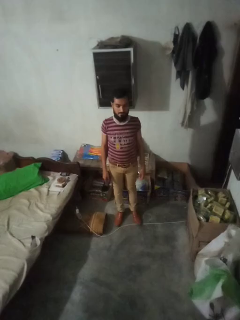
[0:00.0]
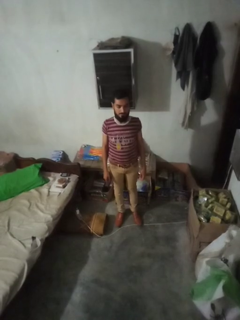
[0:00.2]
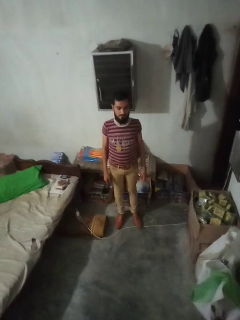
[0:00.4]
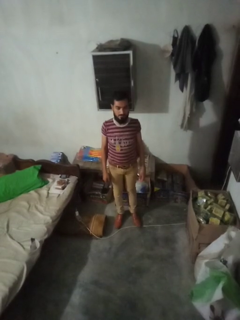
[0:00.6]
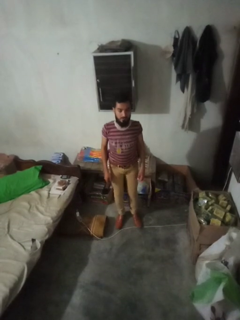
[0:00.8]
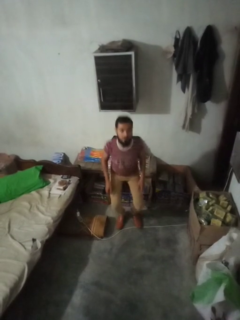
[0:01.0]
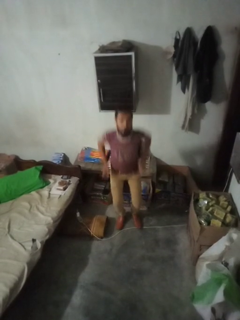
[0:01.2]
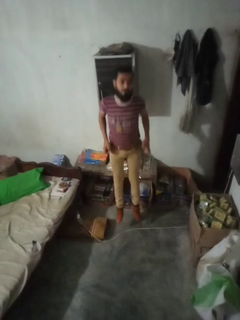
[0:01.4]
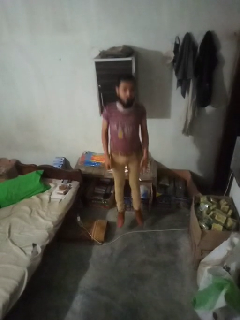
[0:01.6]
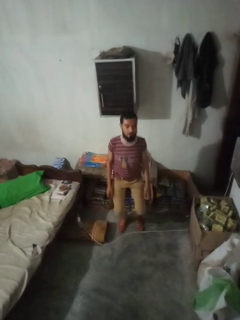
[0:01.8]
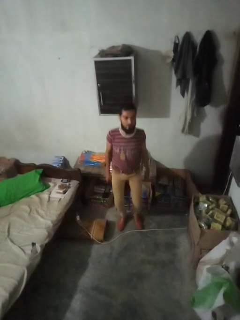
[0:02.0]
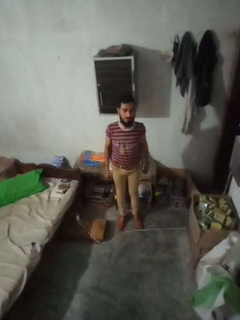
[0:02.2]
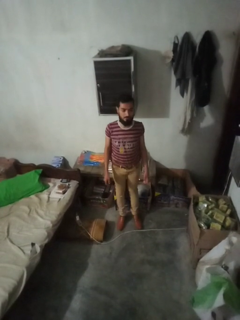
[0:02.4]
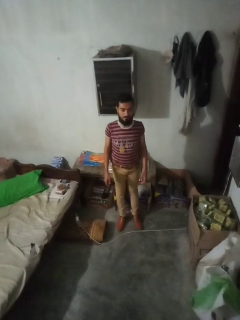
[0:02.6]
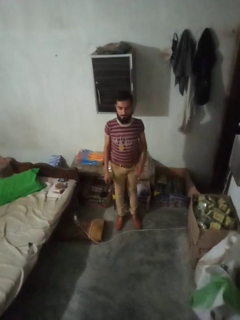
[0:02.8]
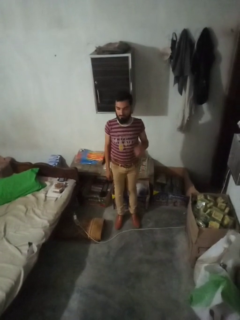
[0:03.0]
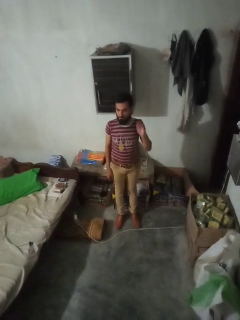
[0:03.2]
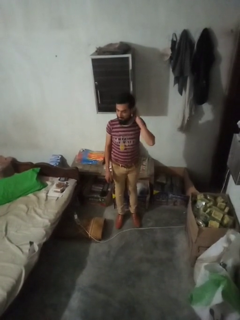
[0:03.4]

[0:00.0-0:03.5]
person jumps

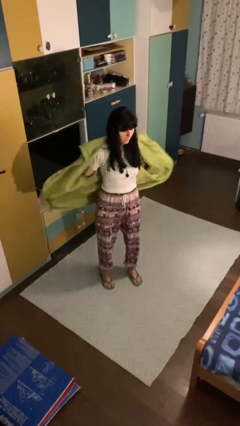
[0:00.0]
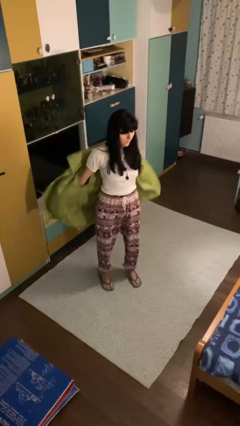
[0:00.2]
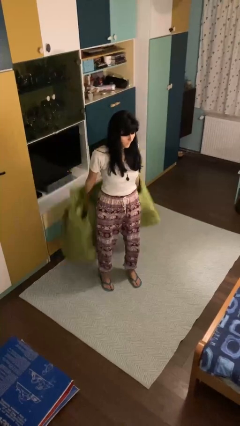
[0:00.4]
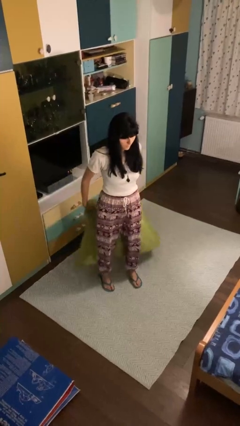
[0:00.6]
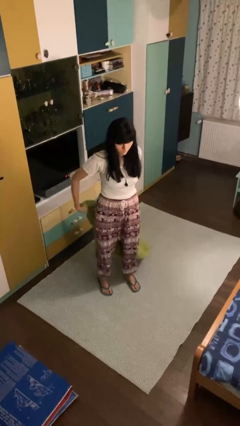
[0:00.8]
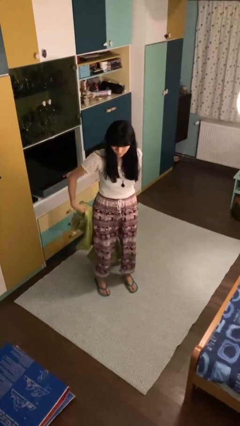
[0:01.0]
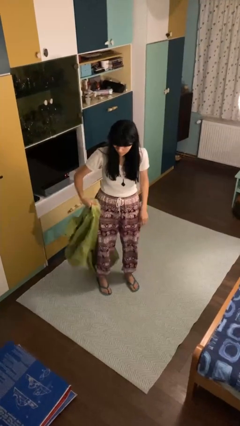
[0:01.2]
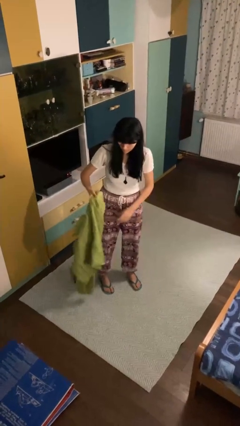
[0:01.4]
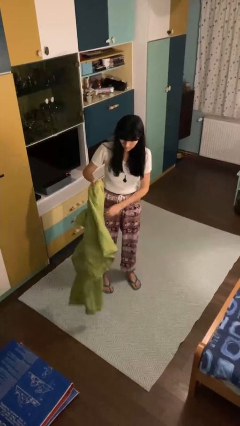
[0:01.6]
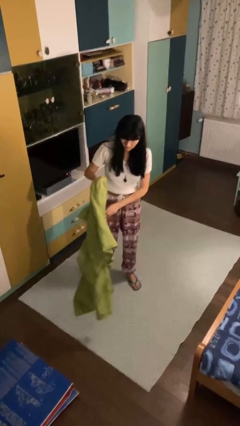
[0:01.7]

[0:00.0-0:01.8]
person takes off jacket

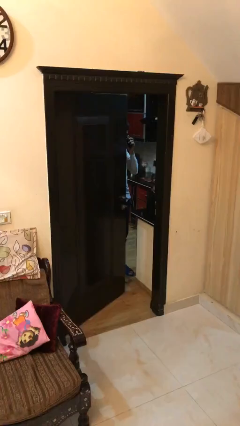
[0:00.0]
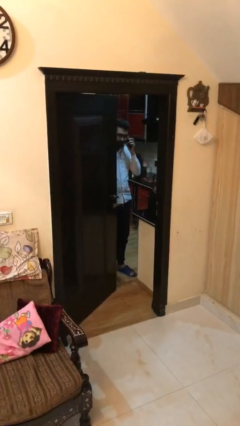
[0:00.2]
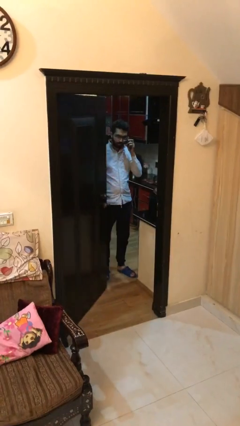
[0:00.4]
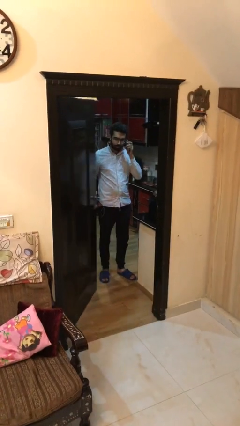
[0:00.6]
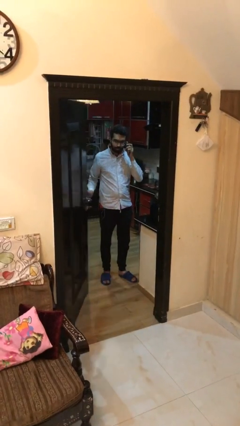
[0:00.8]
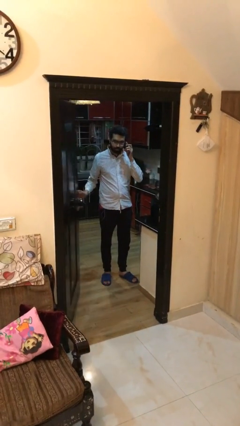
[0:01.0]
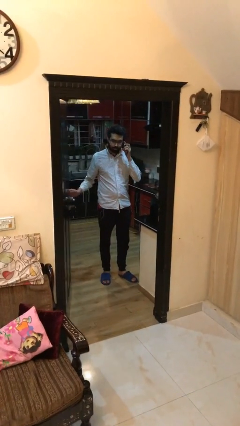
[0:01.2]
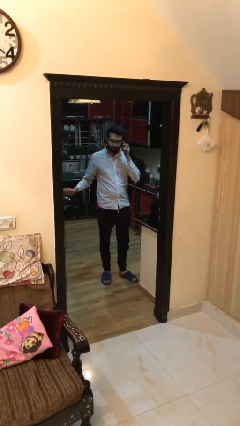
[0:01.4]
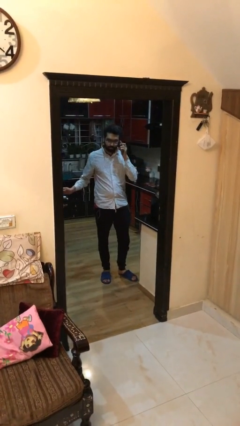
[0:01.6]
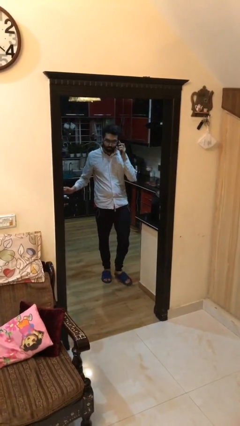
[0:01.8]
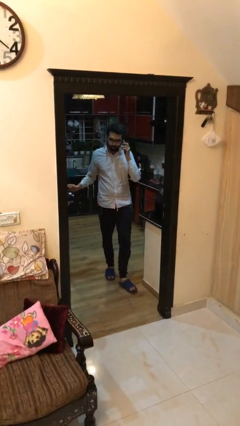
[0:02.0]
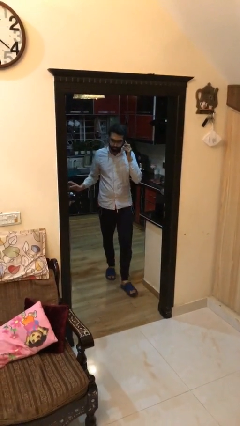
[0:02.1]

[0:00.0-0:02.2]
person opens facility door

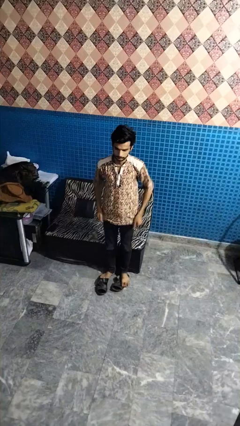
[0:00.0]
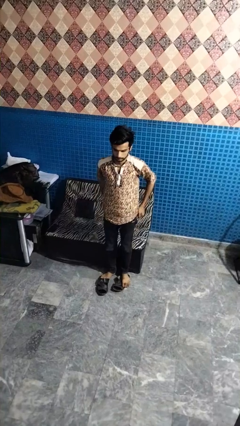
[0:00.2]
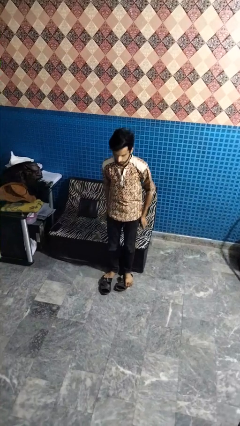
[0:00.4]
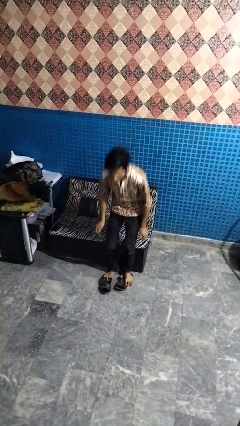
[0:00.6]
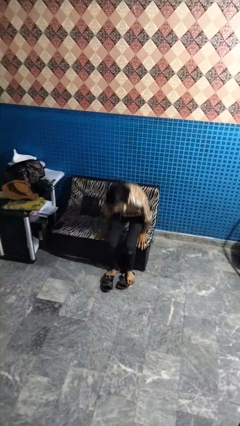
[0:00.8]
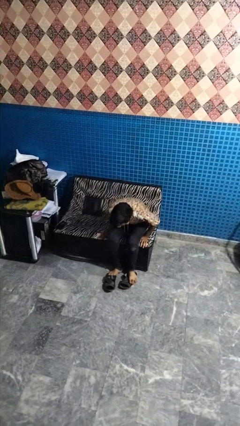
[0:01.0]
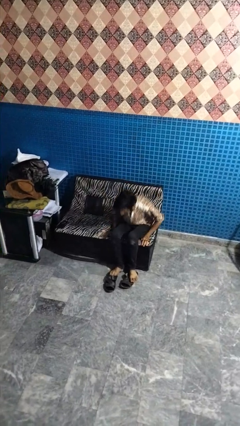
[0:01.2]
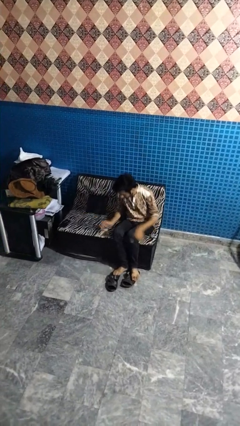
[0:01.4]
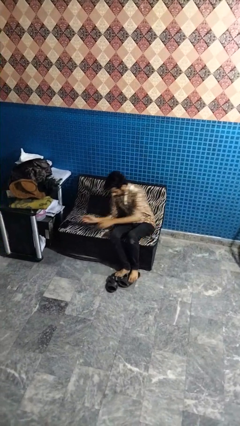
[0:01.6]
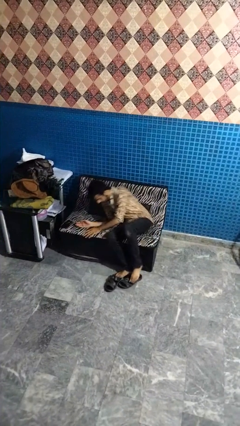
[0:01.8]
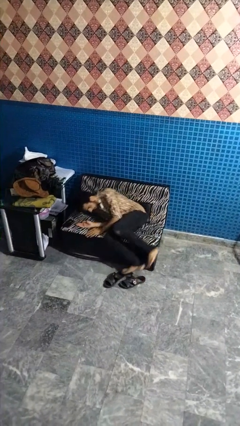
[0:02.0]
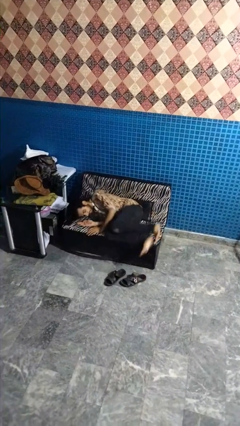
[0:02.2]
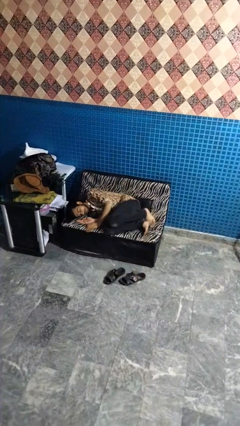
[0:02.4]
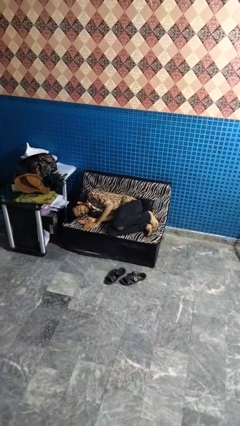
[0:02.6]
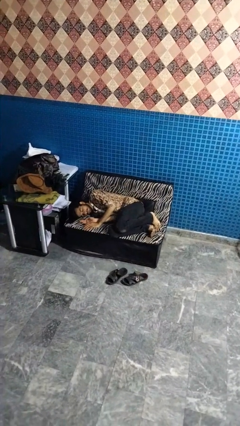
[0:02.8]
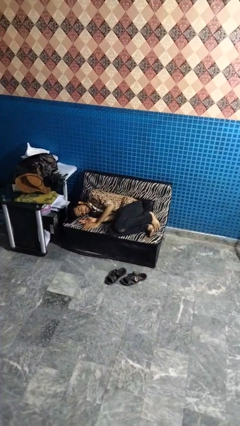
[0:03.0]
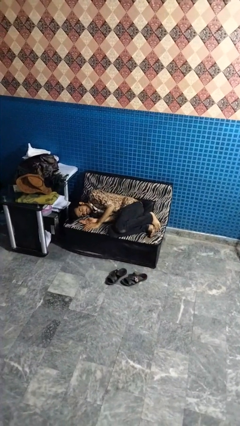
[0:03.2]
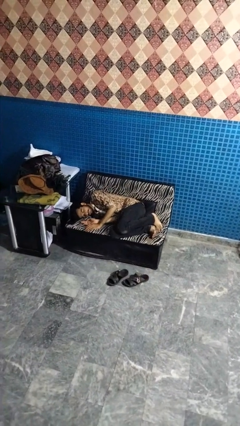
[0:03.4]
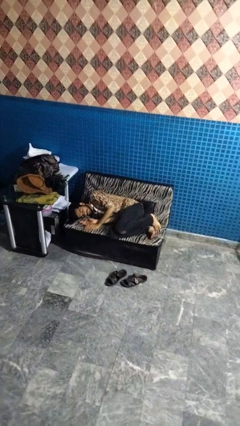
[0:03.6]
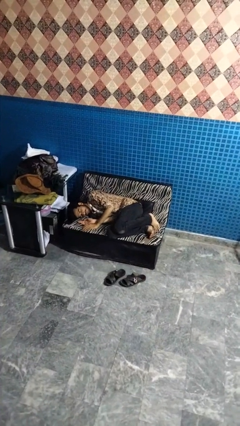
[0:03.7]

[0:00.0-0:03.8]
person lies down on couch

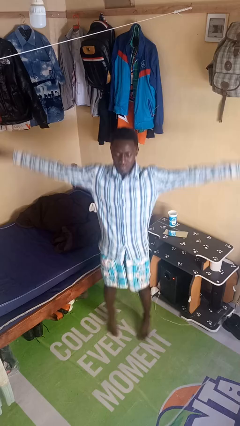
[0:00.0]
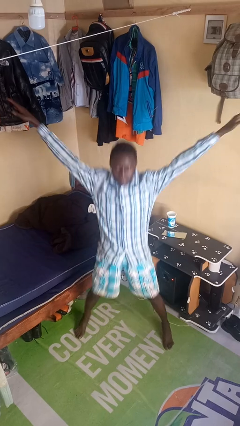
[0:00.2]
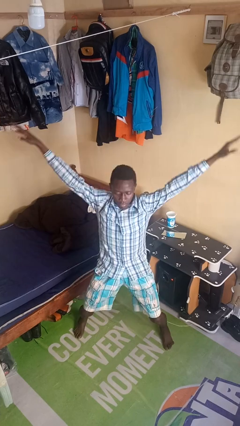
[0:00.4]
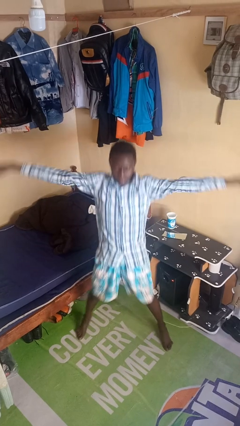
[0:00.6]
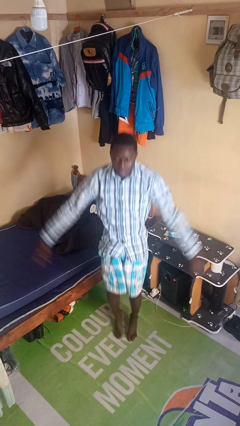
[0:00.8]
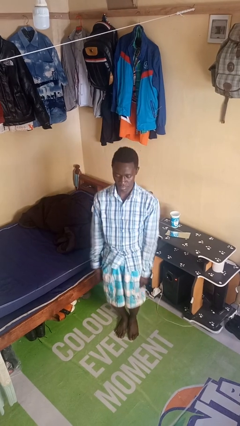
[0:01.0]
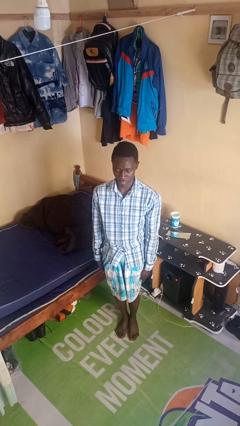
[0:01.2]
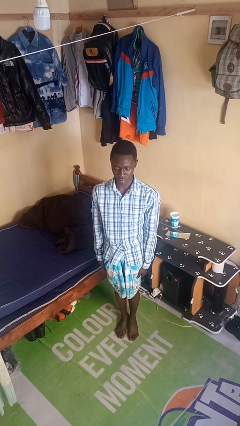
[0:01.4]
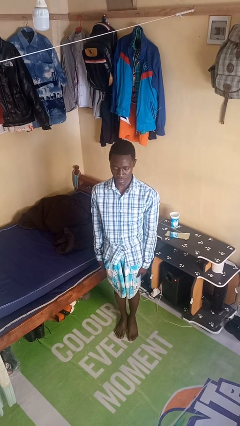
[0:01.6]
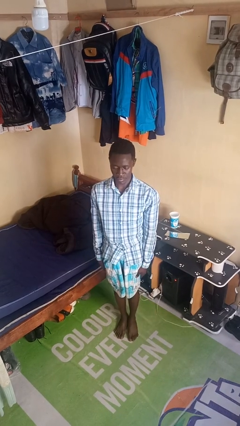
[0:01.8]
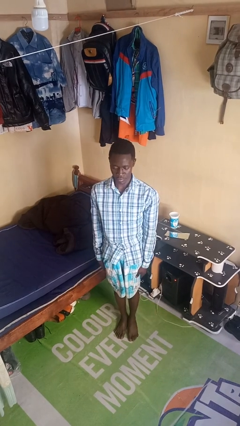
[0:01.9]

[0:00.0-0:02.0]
person exercises with jumping jacks

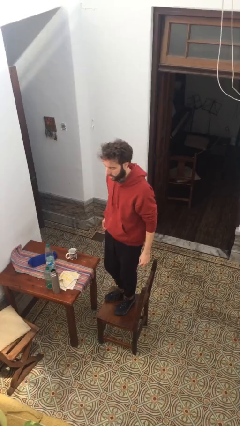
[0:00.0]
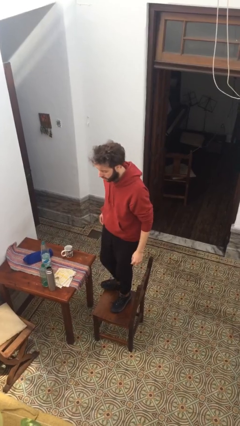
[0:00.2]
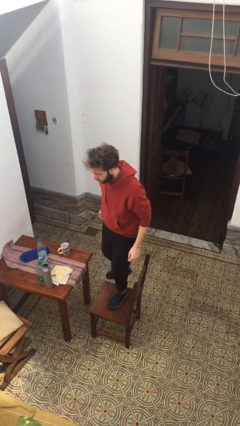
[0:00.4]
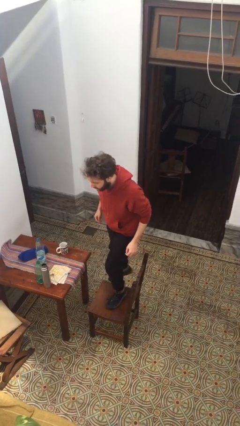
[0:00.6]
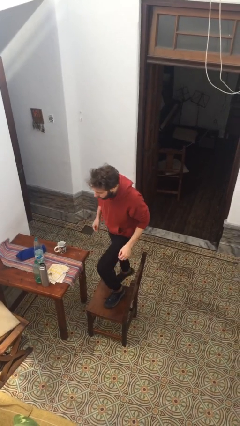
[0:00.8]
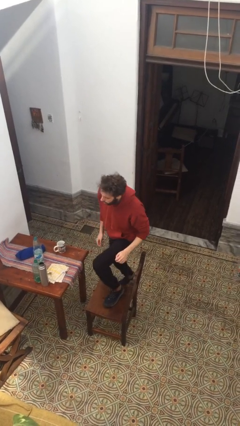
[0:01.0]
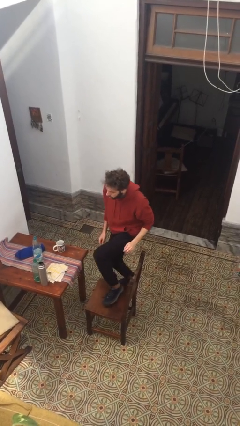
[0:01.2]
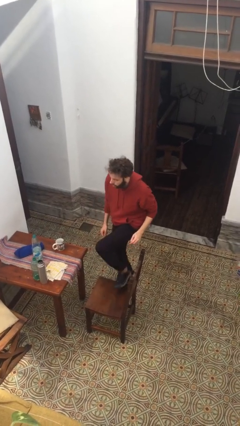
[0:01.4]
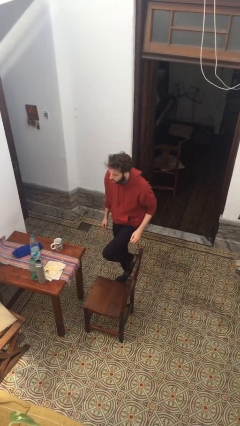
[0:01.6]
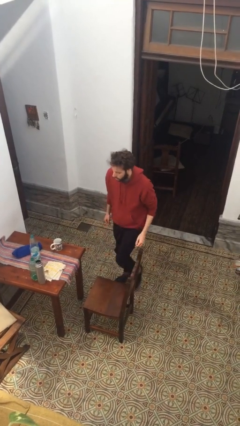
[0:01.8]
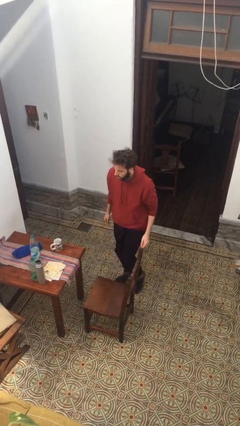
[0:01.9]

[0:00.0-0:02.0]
person climbs off chair

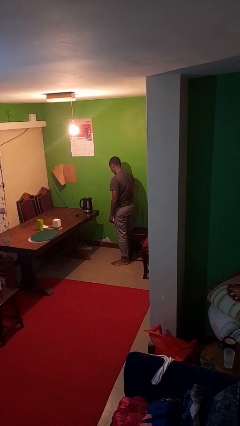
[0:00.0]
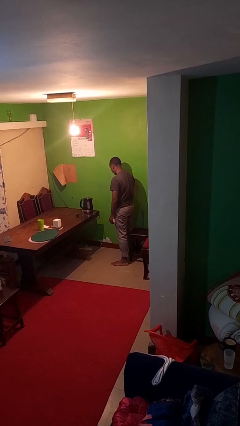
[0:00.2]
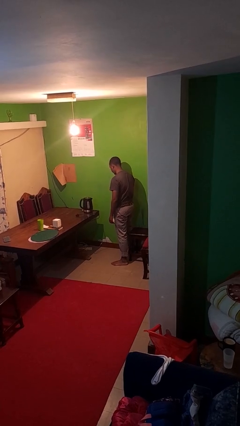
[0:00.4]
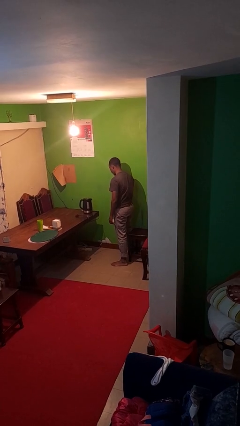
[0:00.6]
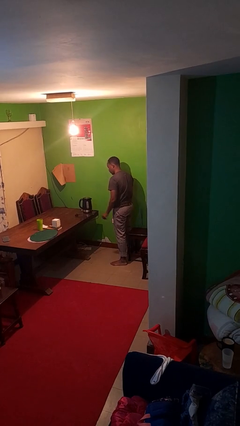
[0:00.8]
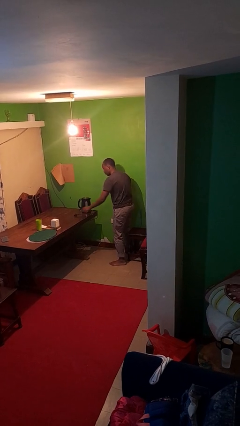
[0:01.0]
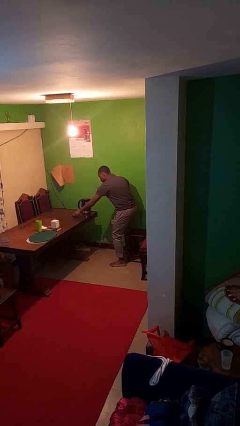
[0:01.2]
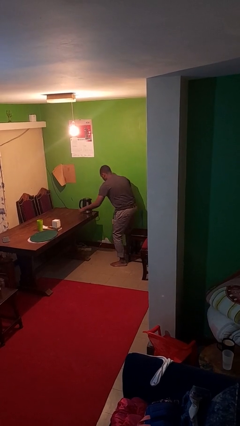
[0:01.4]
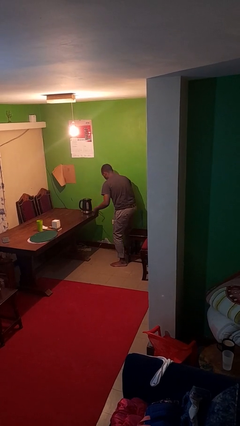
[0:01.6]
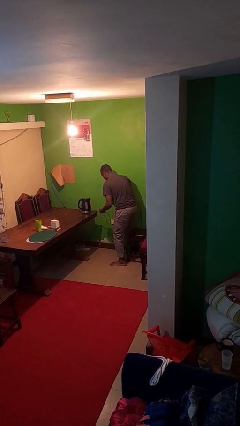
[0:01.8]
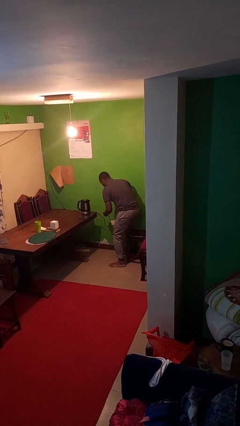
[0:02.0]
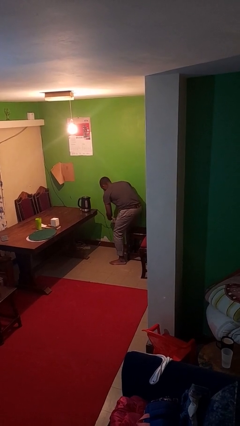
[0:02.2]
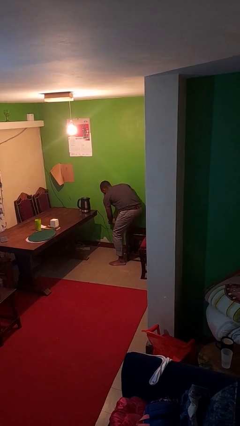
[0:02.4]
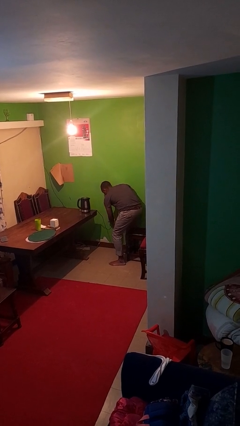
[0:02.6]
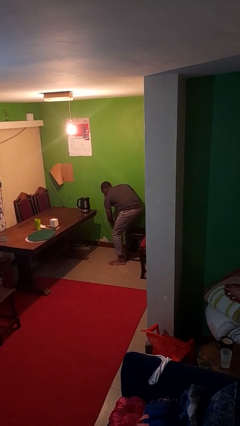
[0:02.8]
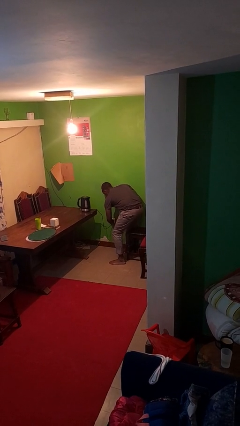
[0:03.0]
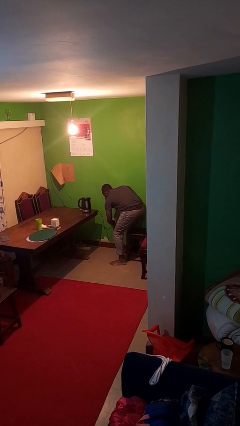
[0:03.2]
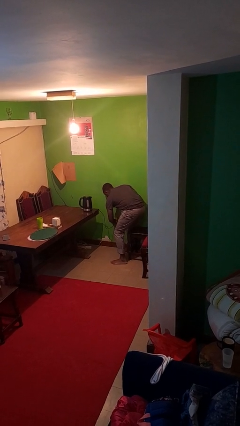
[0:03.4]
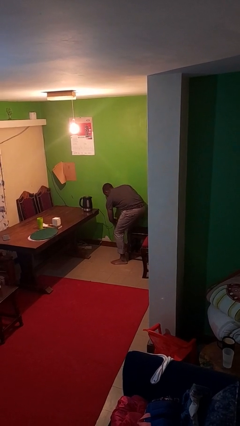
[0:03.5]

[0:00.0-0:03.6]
person plugs into electrical socket
